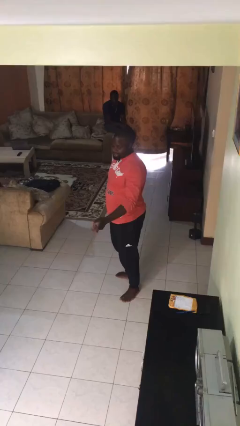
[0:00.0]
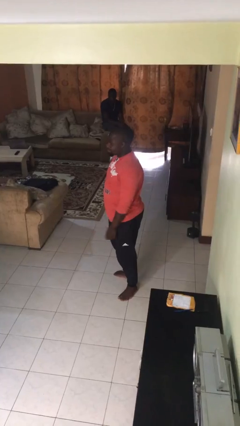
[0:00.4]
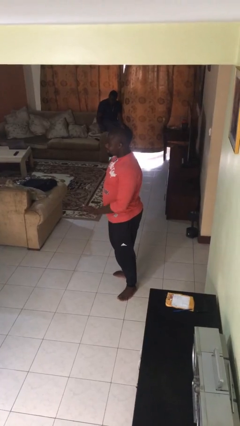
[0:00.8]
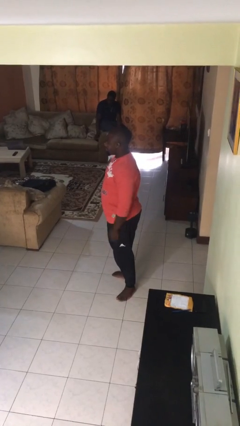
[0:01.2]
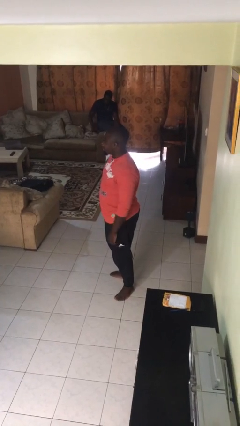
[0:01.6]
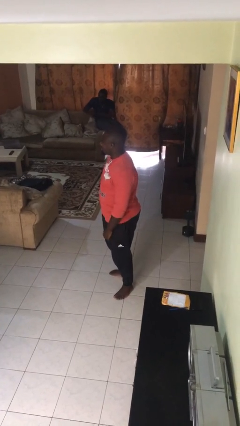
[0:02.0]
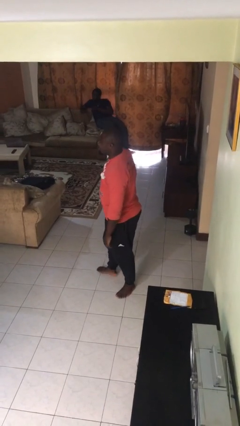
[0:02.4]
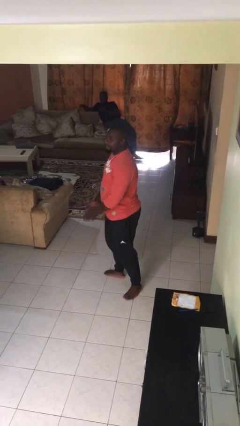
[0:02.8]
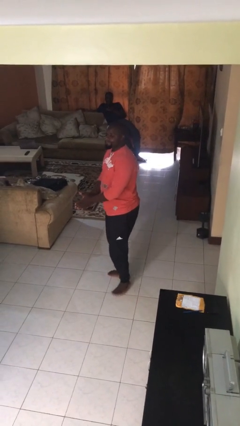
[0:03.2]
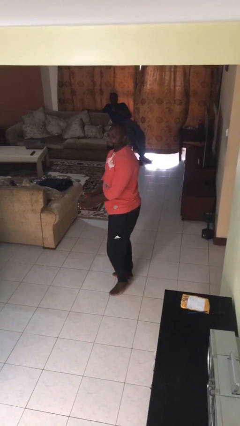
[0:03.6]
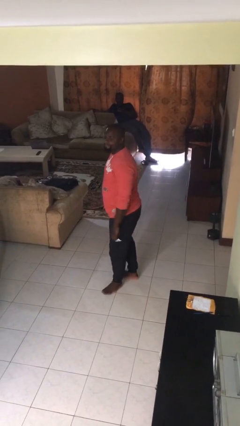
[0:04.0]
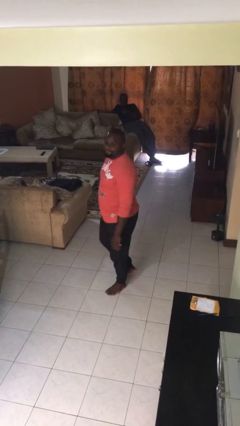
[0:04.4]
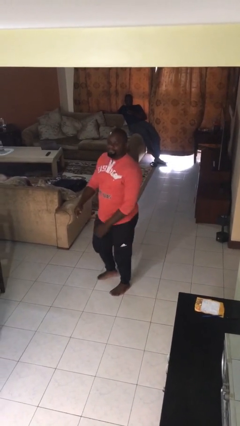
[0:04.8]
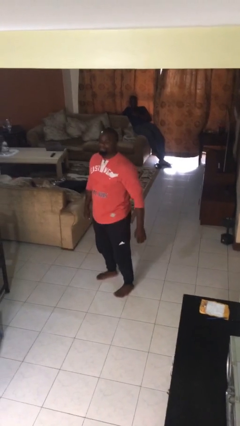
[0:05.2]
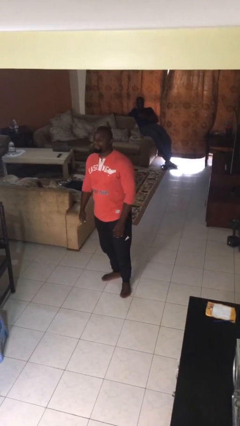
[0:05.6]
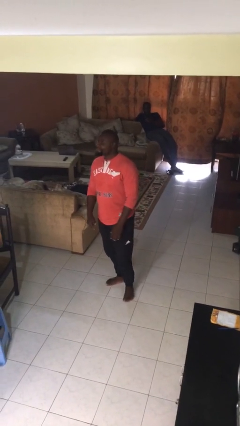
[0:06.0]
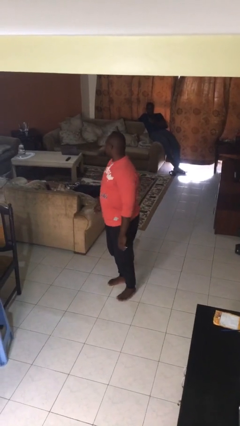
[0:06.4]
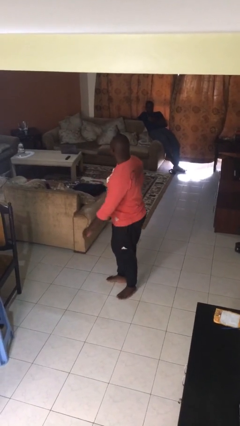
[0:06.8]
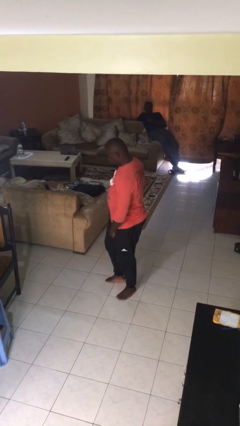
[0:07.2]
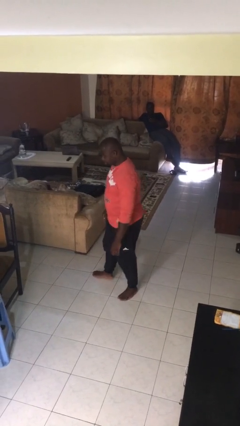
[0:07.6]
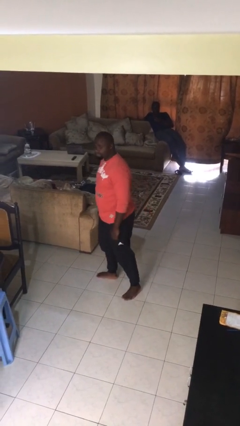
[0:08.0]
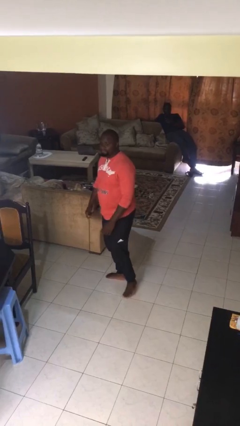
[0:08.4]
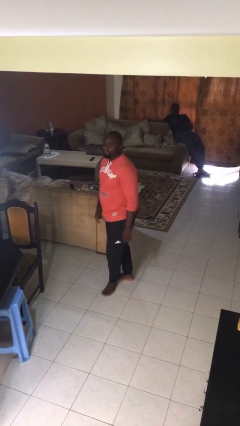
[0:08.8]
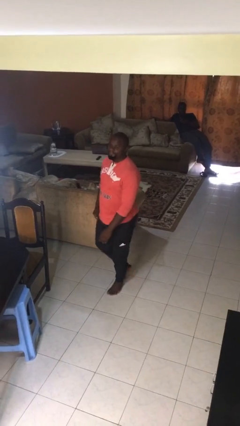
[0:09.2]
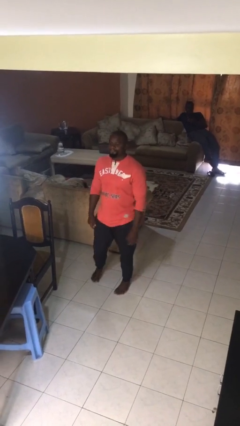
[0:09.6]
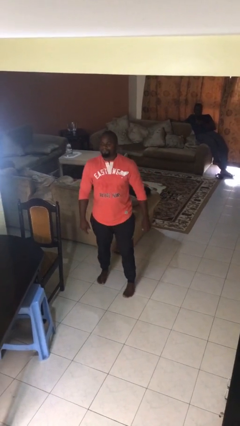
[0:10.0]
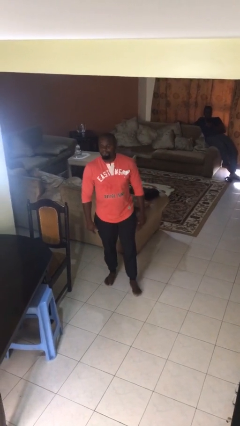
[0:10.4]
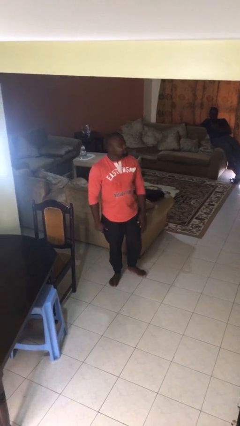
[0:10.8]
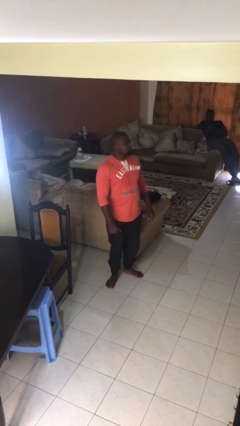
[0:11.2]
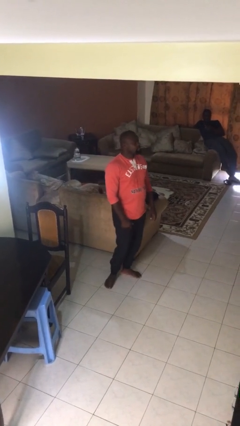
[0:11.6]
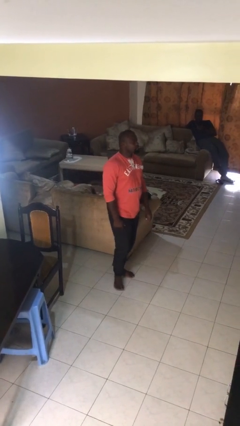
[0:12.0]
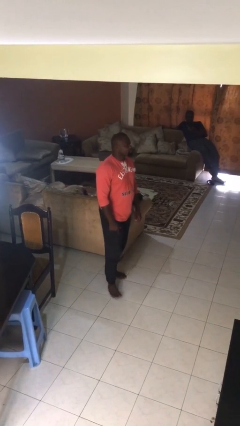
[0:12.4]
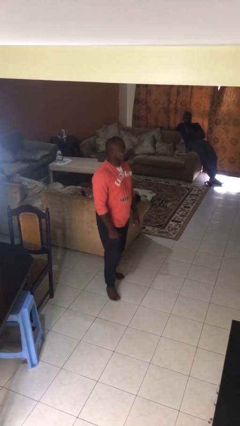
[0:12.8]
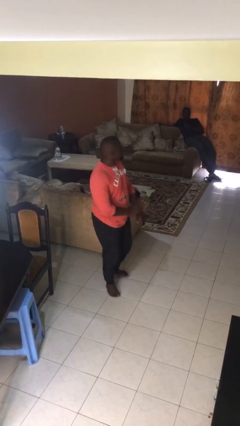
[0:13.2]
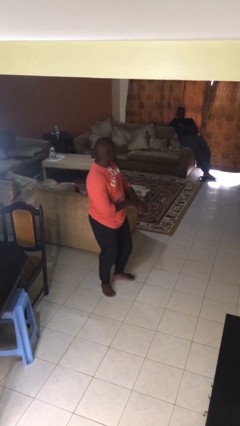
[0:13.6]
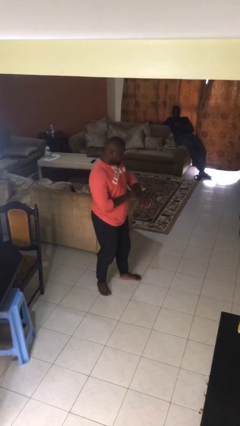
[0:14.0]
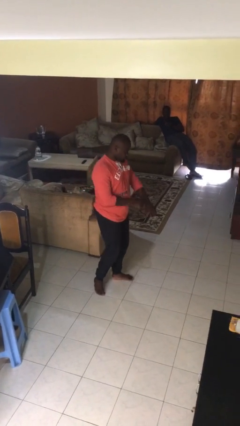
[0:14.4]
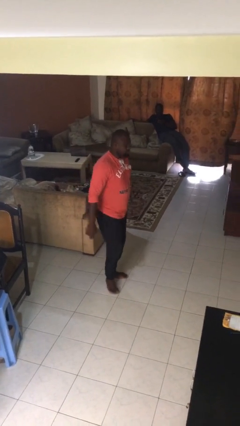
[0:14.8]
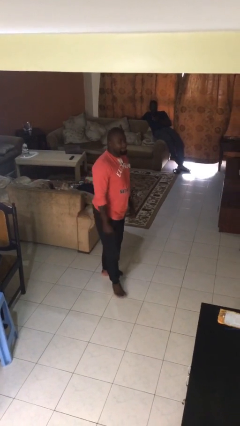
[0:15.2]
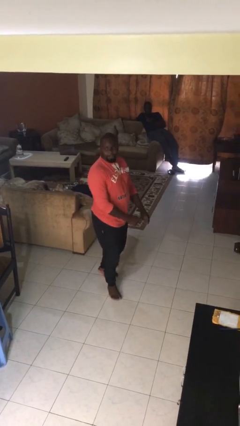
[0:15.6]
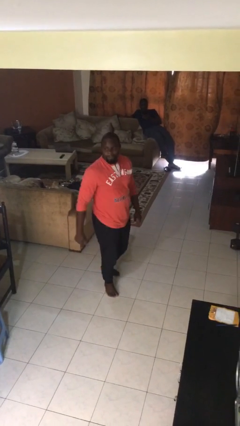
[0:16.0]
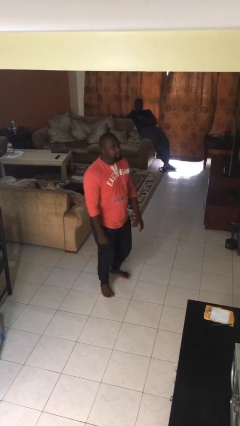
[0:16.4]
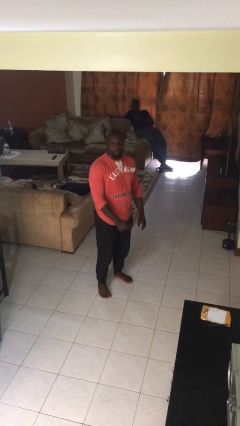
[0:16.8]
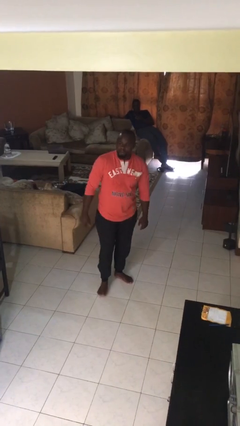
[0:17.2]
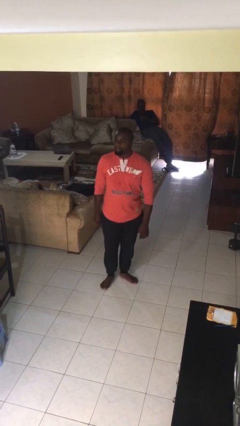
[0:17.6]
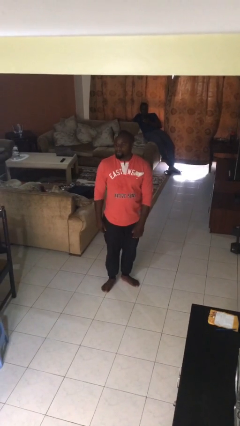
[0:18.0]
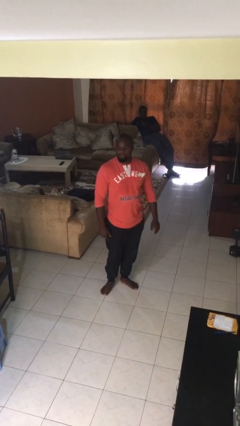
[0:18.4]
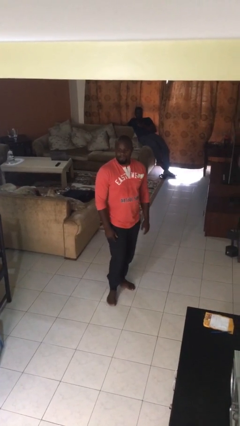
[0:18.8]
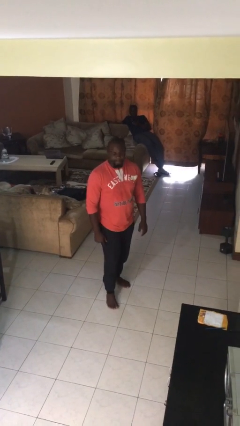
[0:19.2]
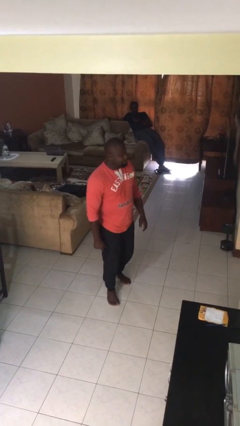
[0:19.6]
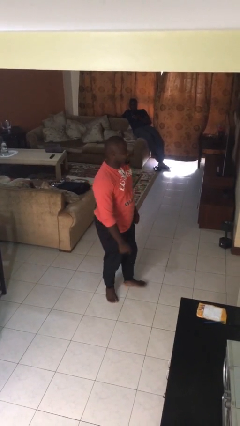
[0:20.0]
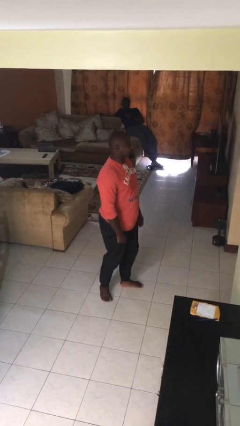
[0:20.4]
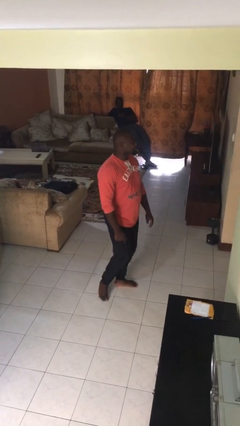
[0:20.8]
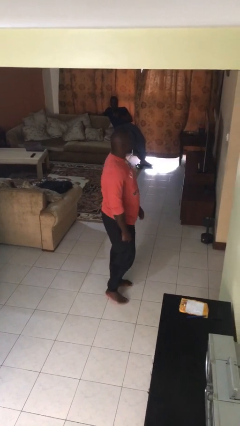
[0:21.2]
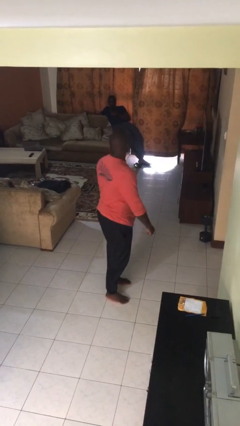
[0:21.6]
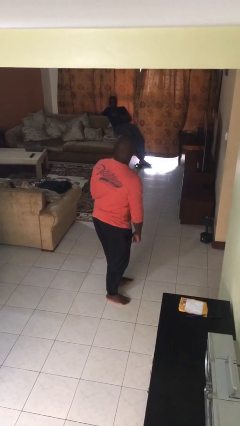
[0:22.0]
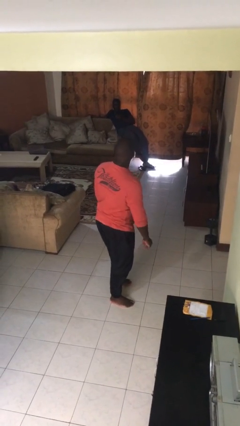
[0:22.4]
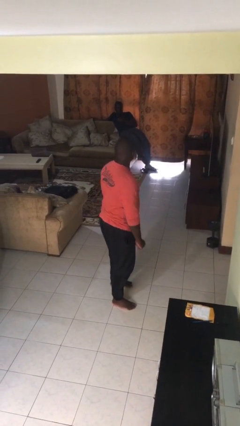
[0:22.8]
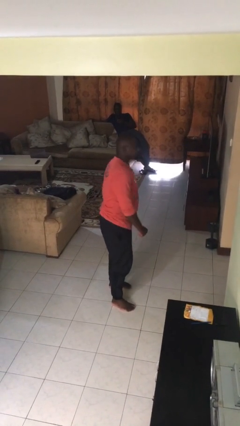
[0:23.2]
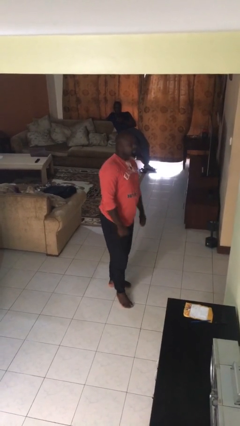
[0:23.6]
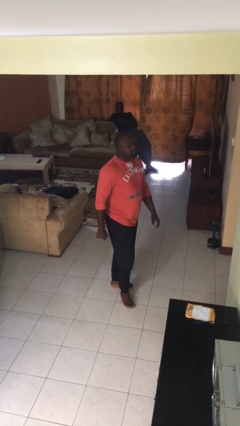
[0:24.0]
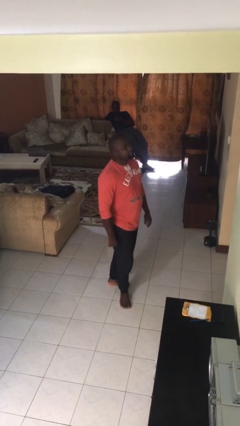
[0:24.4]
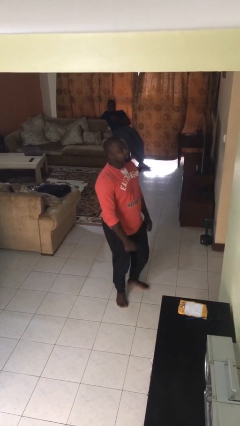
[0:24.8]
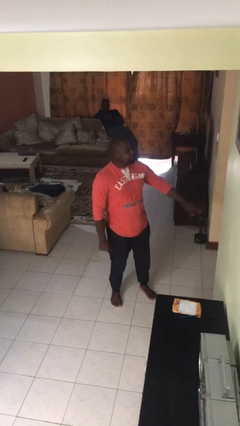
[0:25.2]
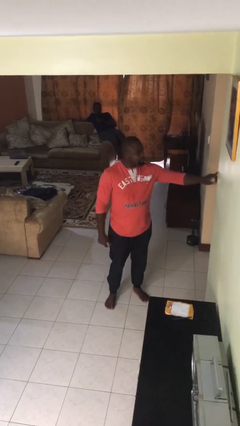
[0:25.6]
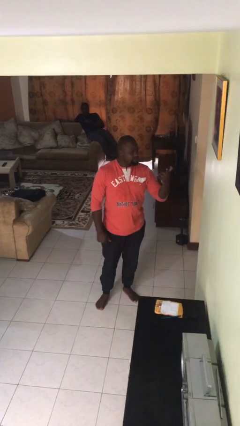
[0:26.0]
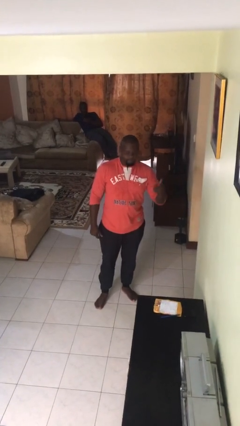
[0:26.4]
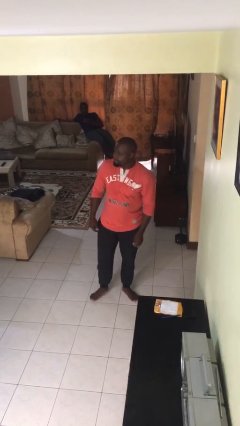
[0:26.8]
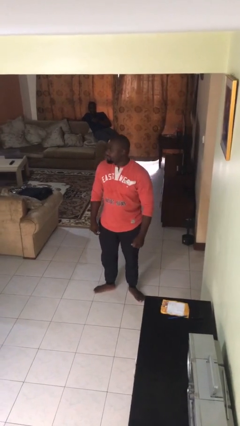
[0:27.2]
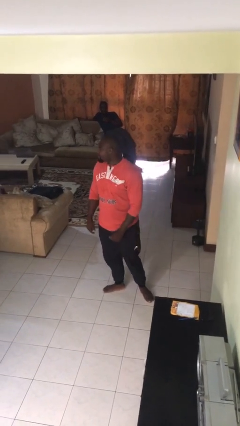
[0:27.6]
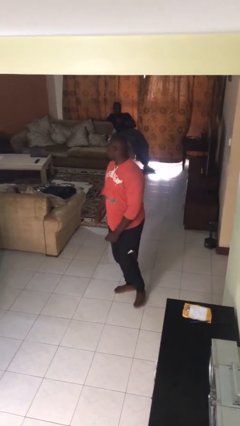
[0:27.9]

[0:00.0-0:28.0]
person walks

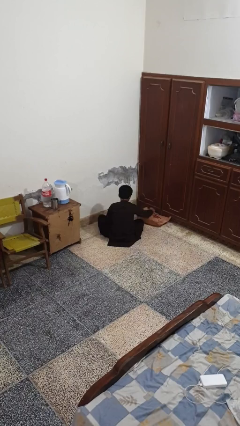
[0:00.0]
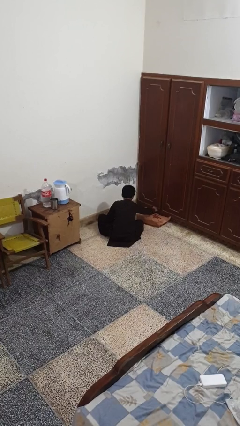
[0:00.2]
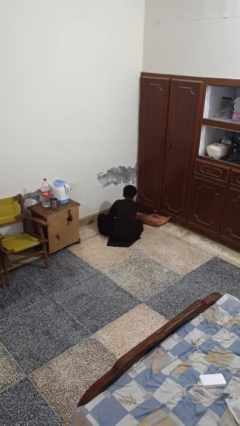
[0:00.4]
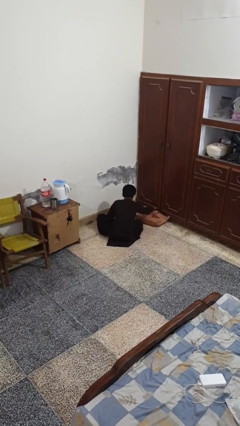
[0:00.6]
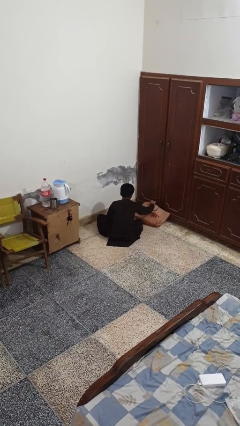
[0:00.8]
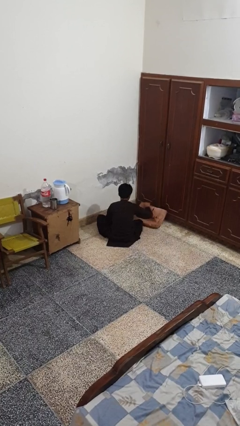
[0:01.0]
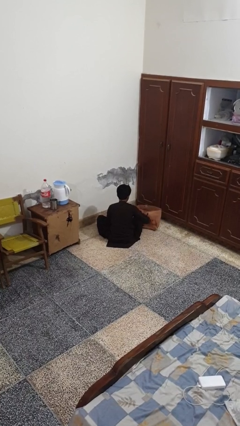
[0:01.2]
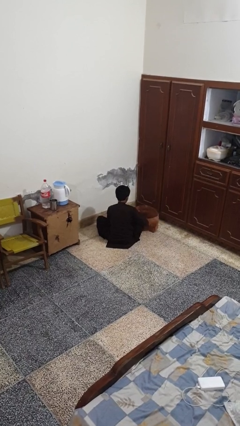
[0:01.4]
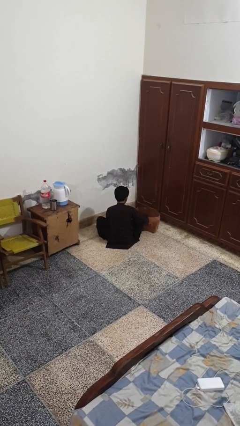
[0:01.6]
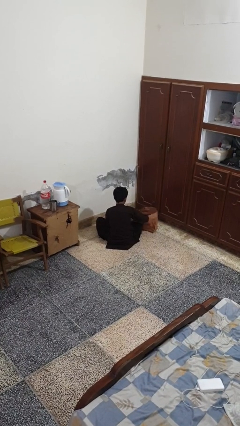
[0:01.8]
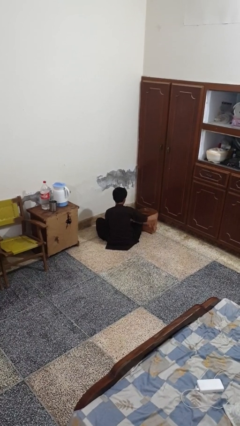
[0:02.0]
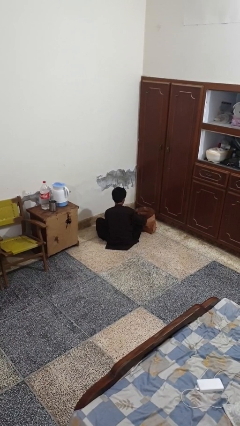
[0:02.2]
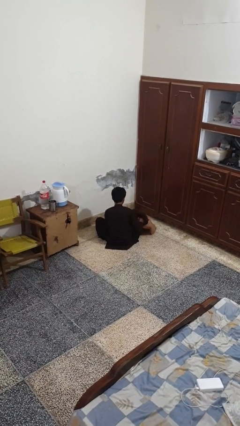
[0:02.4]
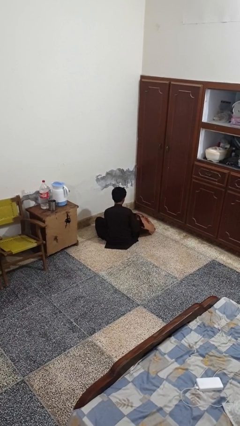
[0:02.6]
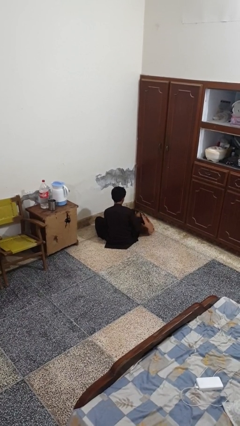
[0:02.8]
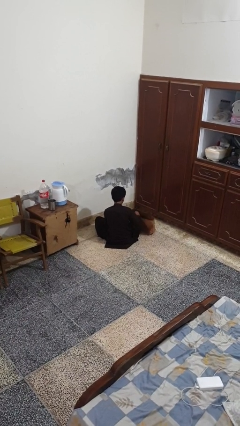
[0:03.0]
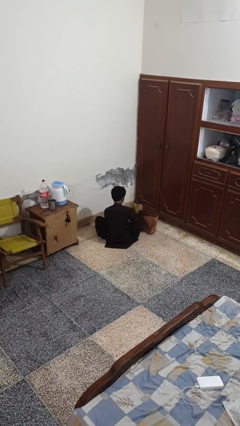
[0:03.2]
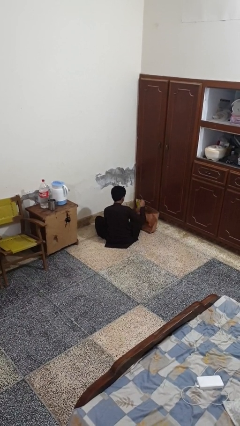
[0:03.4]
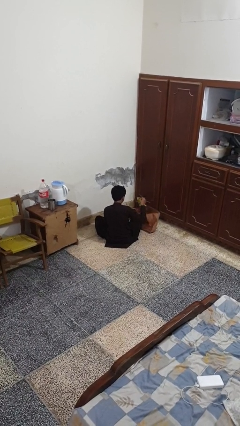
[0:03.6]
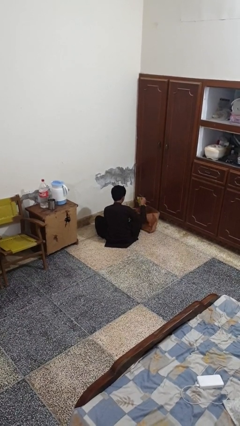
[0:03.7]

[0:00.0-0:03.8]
person takes object from bag
